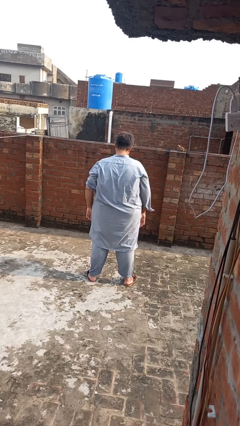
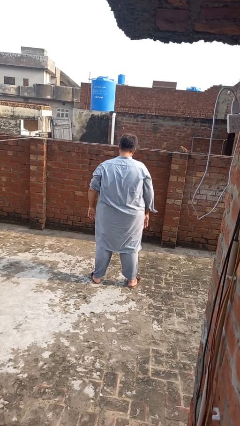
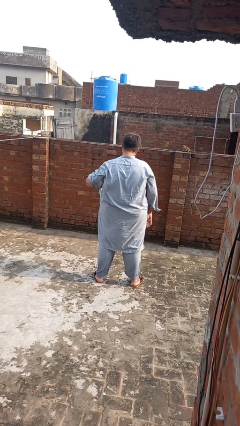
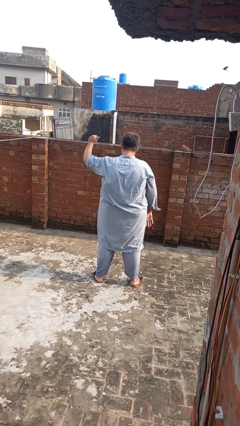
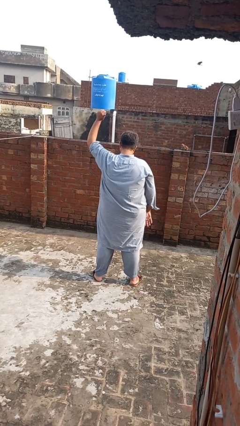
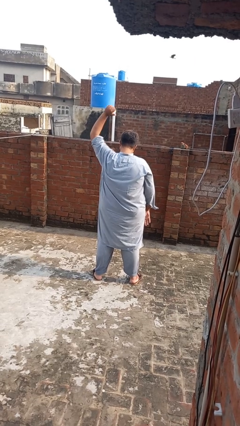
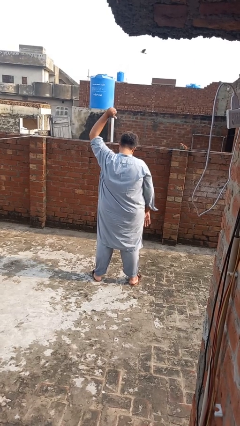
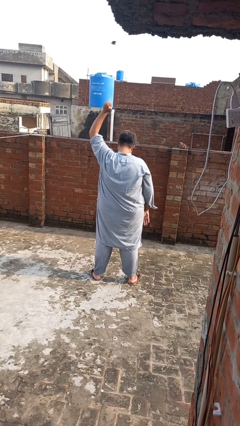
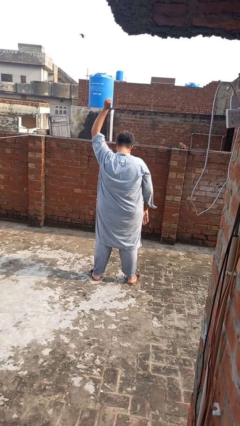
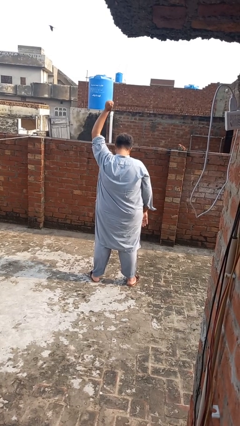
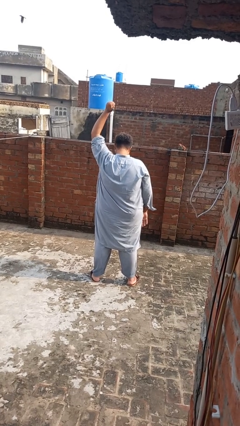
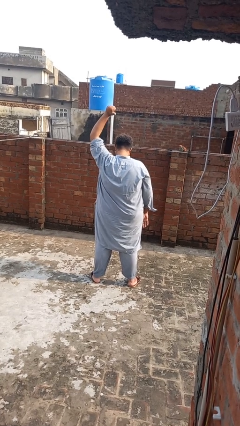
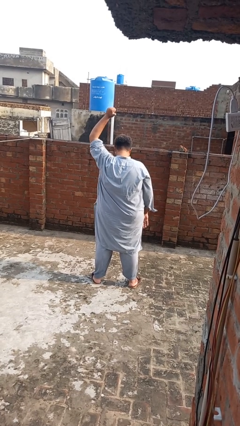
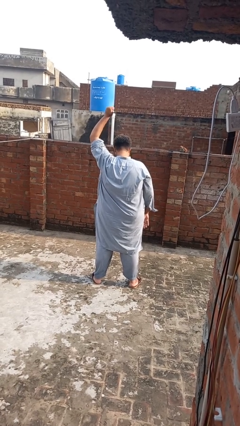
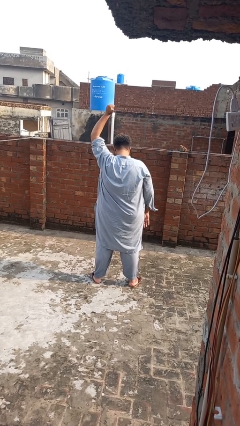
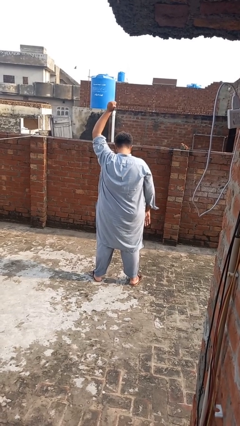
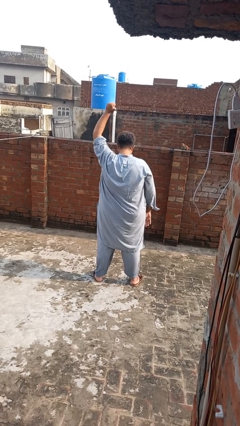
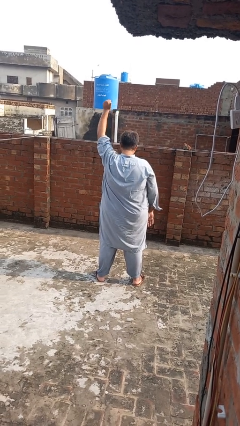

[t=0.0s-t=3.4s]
person gestures behind me

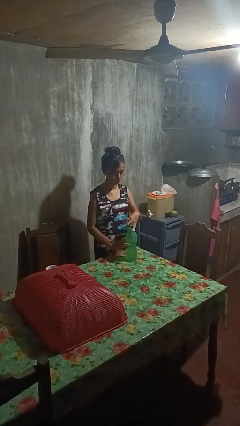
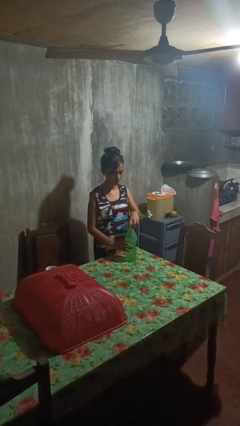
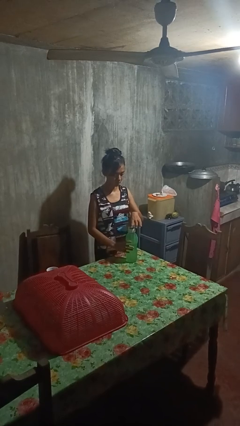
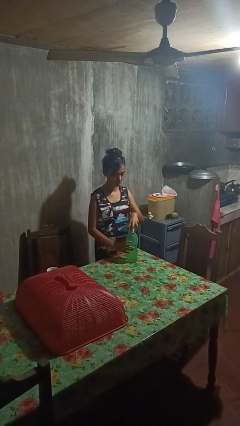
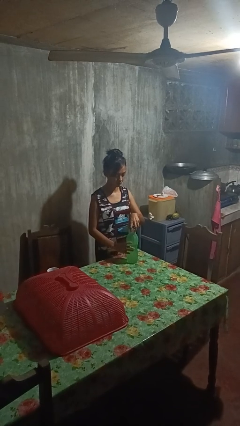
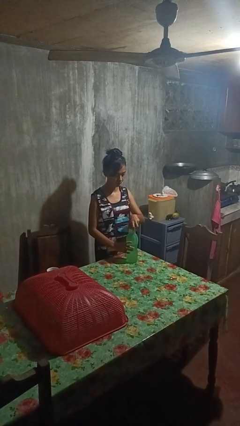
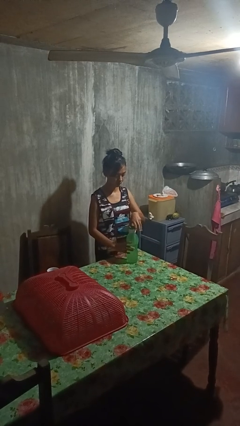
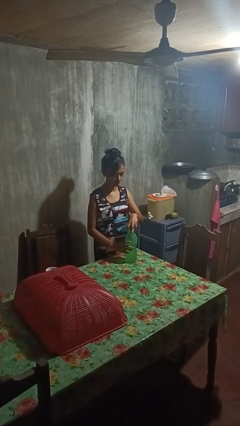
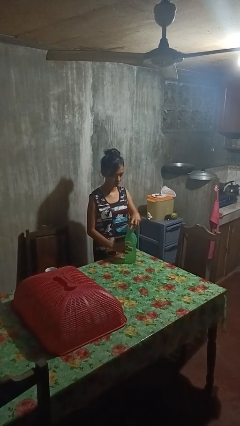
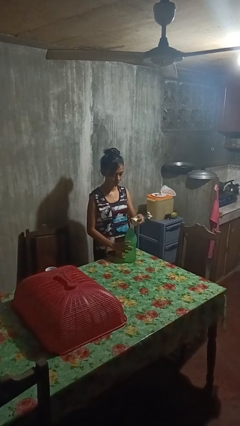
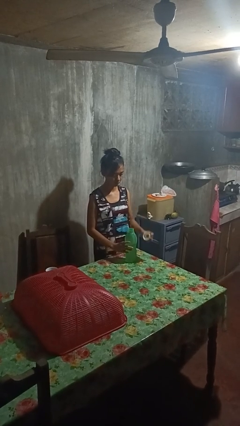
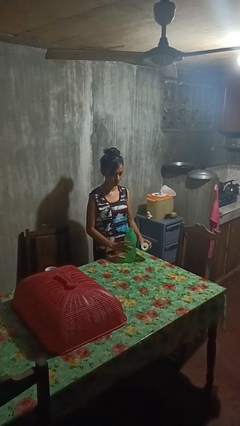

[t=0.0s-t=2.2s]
person unscrews lid from bottle

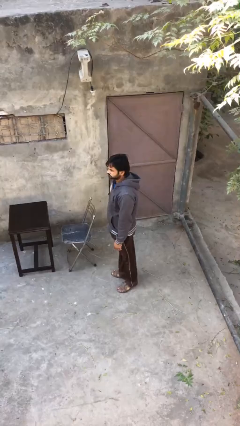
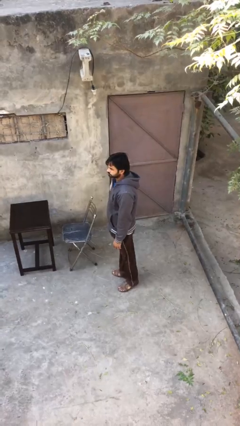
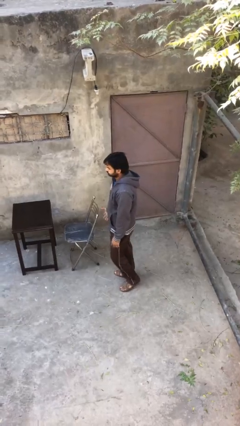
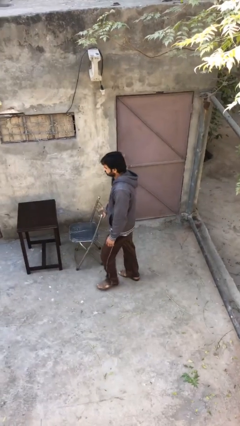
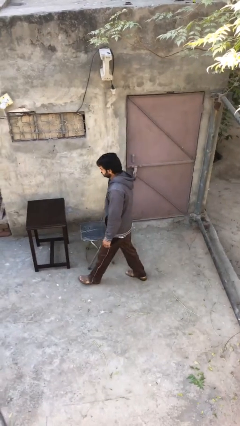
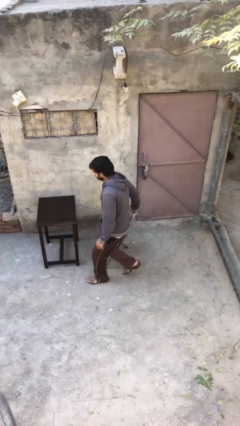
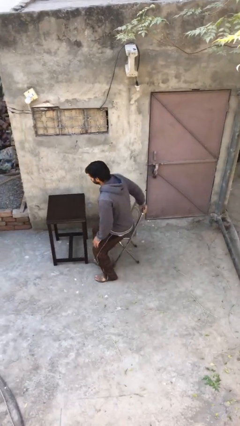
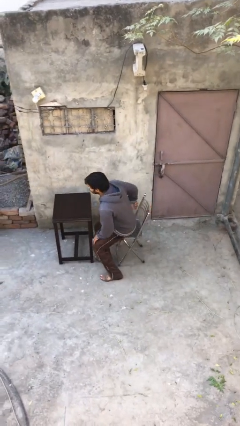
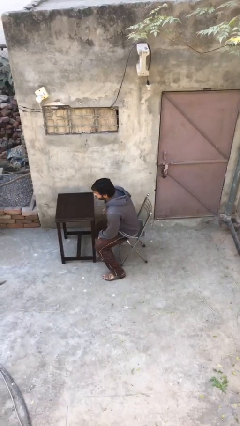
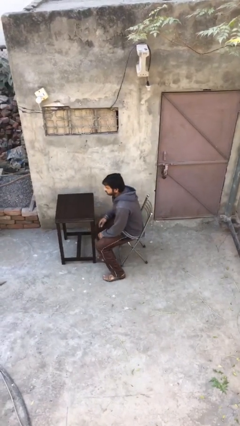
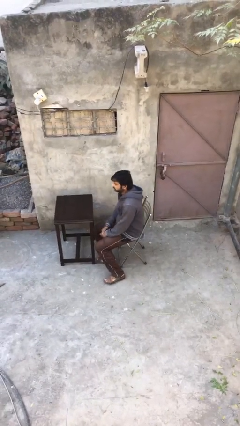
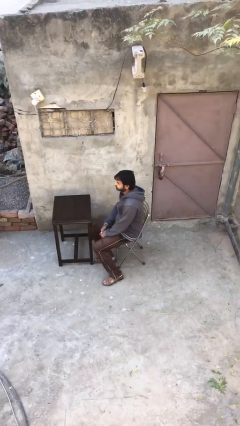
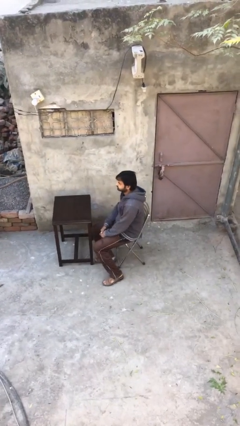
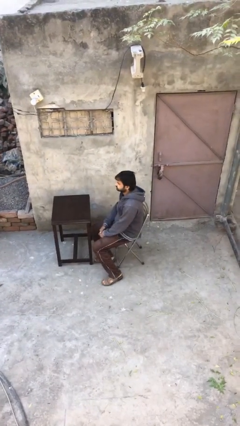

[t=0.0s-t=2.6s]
person sits down

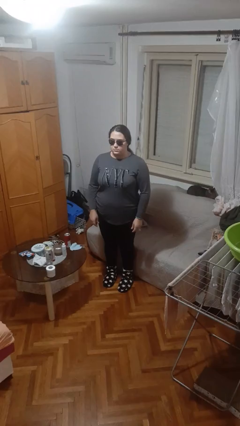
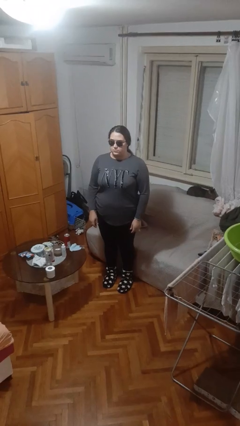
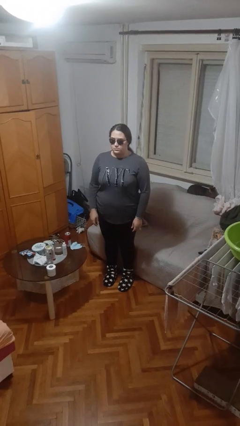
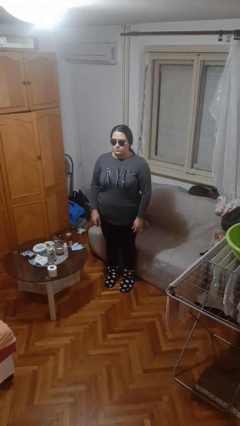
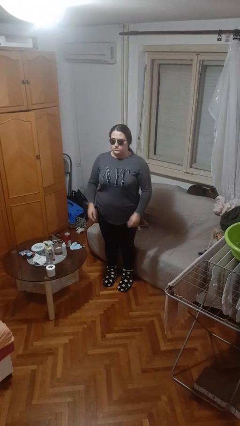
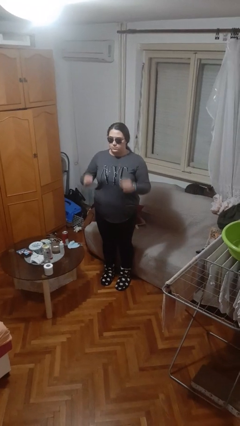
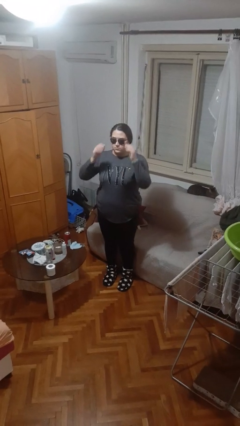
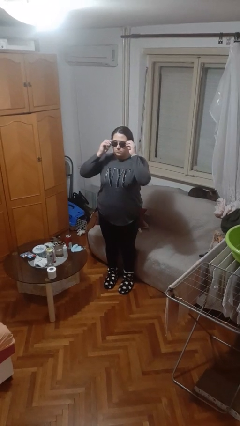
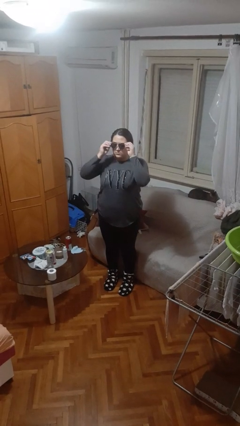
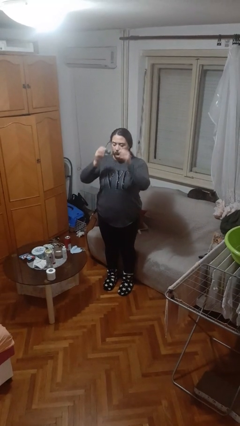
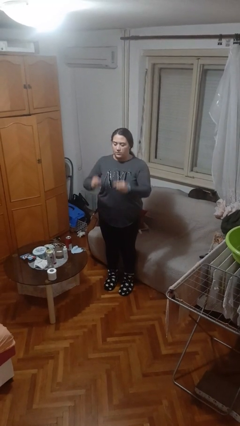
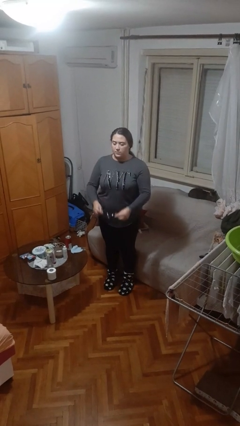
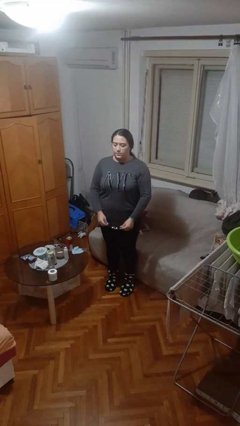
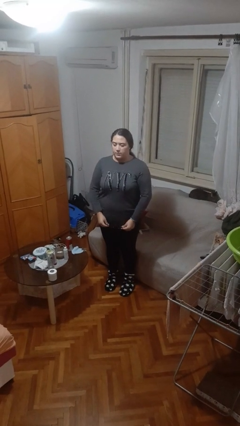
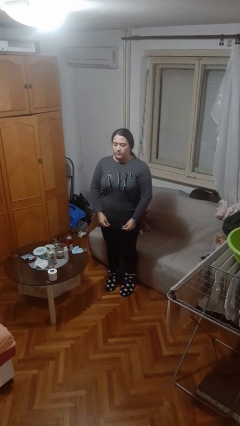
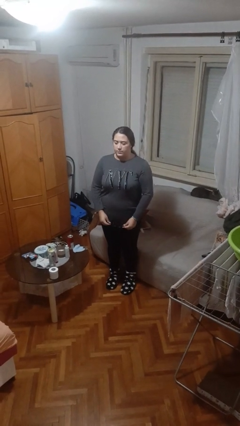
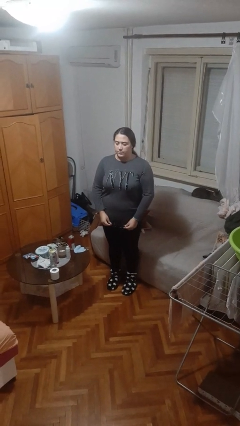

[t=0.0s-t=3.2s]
person takes off sunglasses

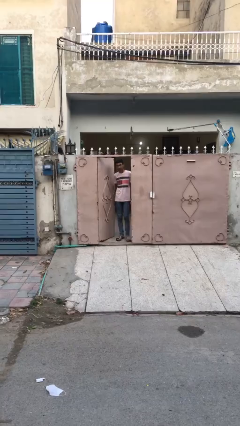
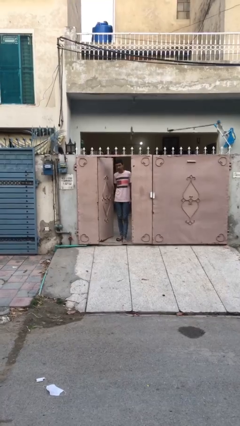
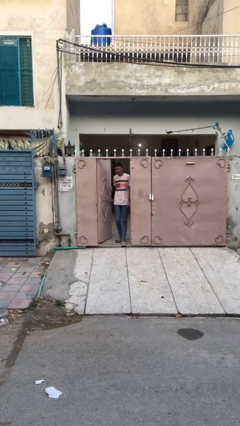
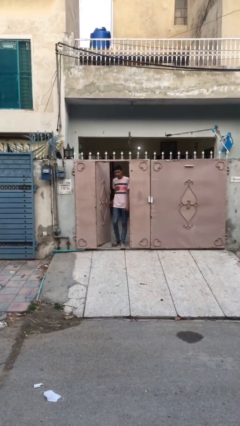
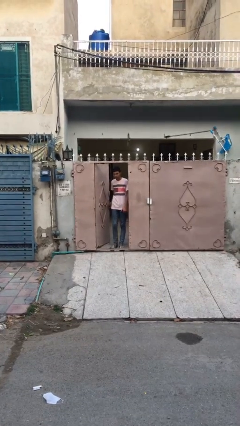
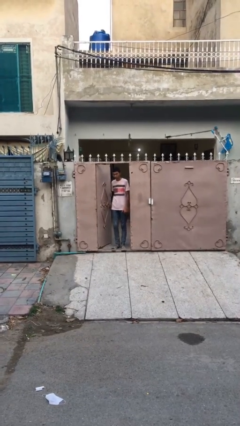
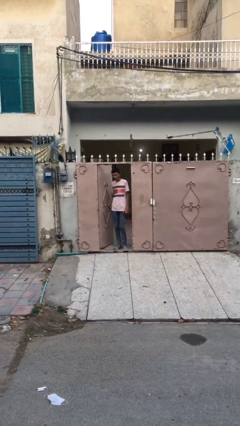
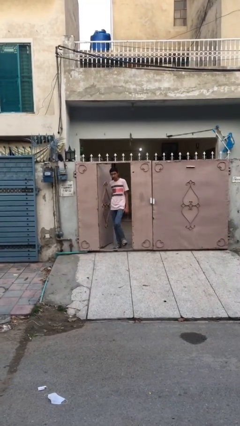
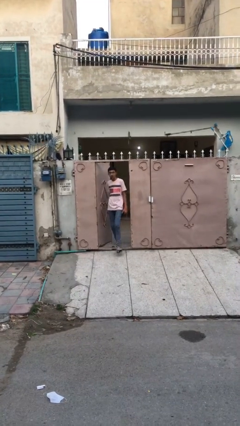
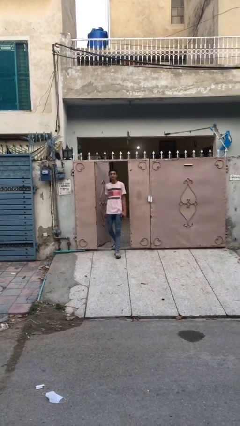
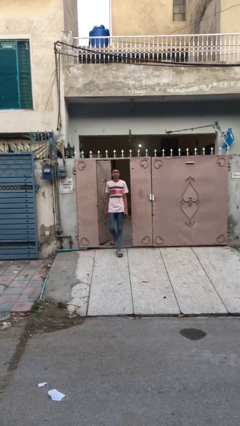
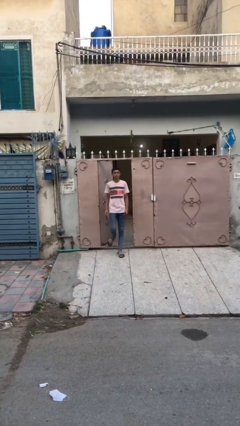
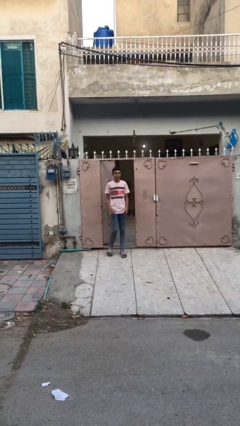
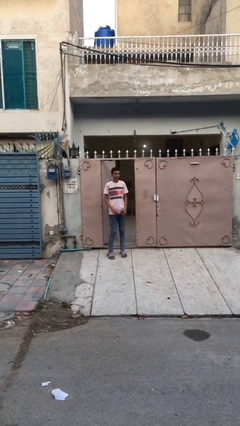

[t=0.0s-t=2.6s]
person enters scene through structure

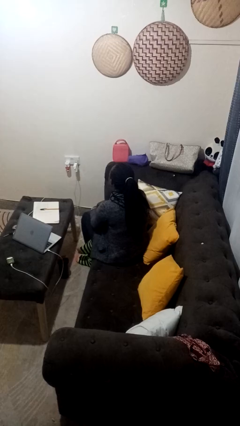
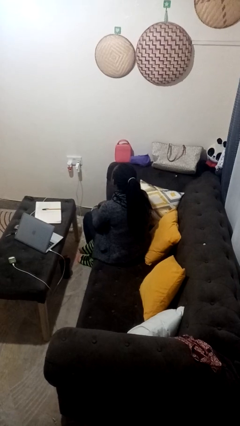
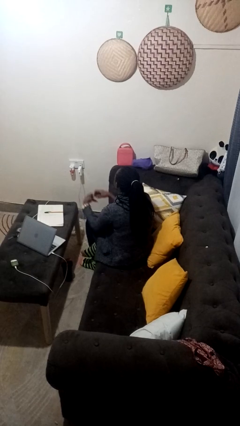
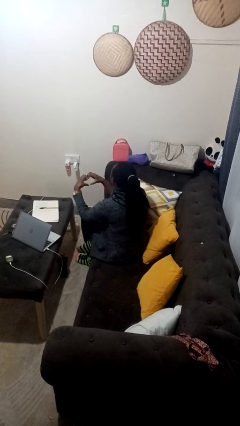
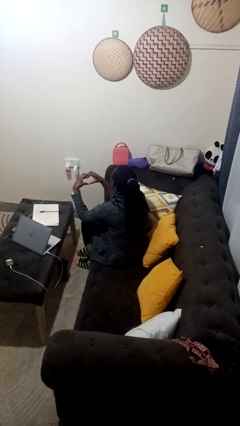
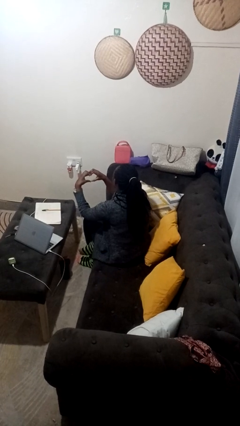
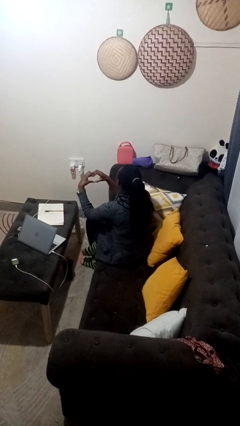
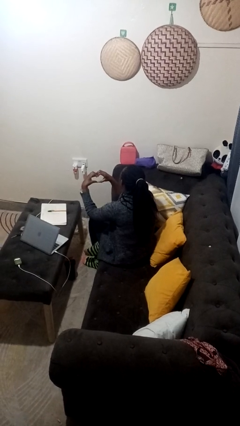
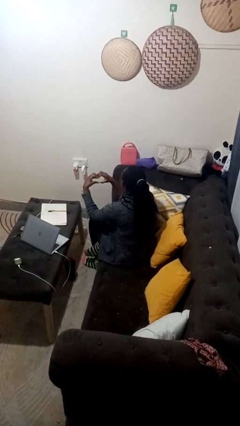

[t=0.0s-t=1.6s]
person gestures heart

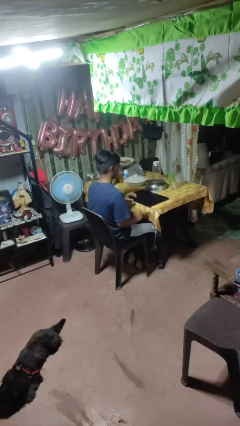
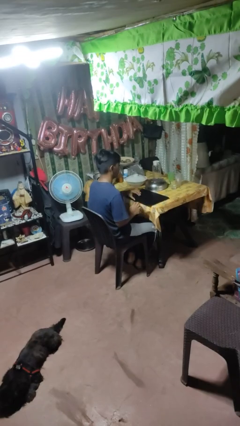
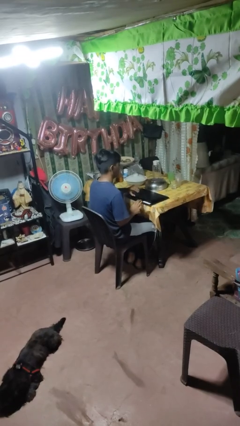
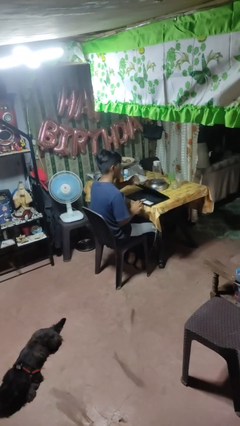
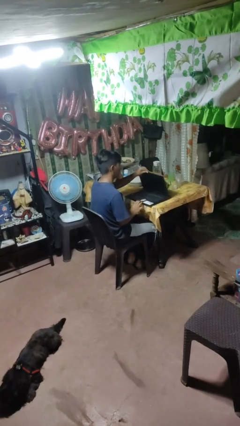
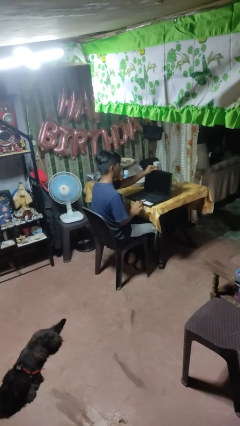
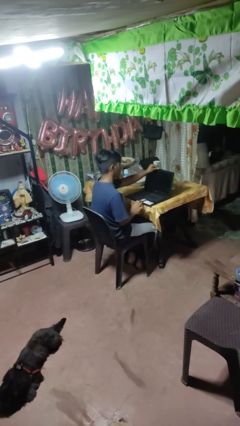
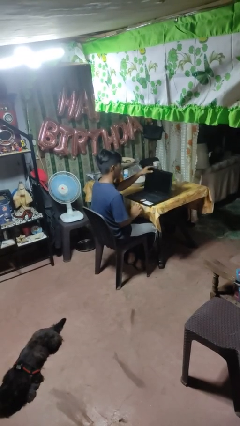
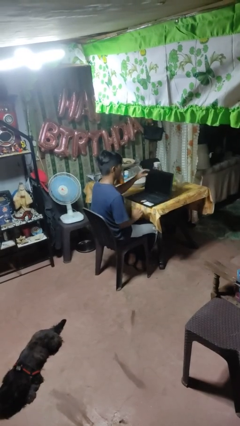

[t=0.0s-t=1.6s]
person opens laptop
